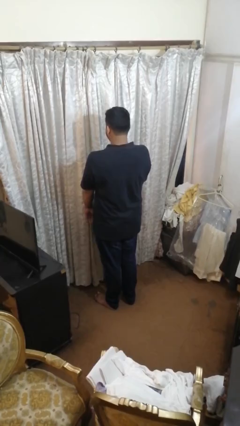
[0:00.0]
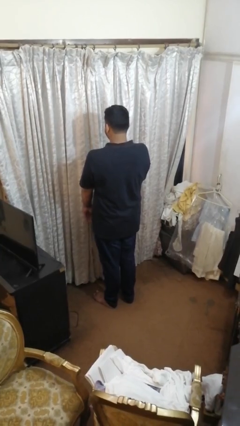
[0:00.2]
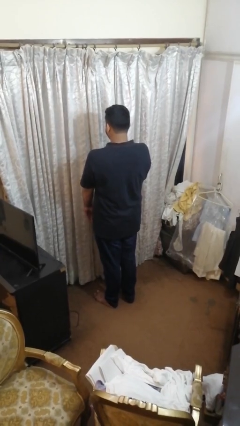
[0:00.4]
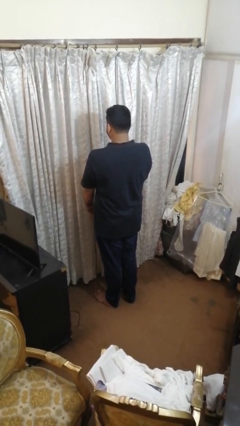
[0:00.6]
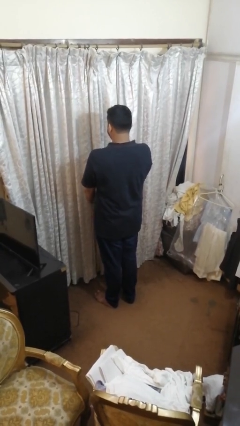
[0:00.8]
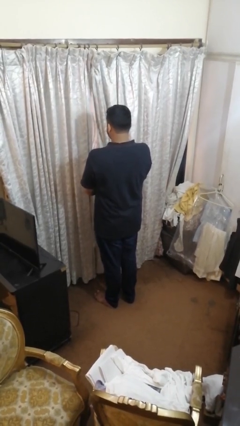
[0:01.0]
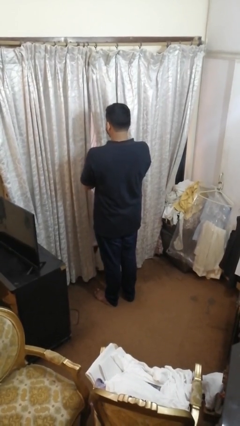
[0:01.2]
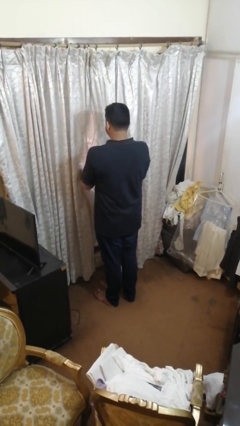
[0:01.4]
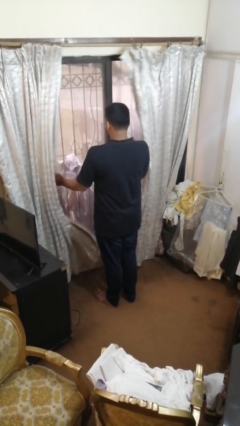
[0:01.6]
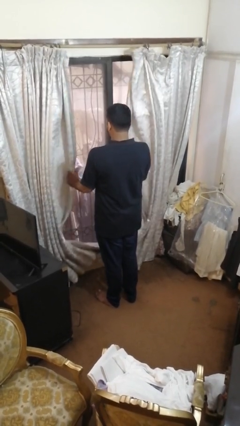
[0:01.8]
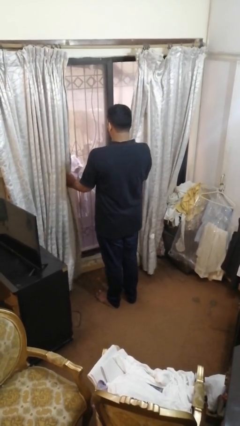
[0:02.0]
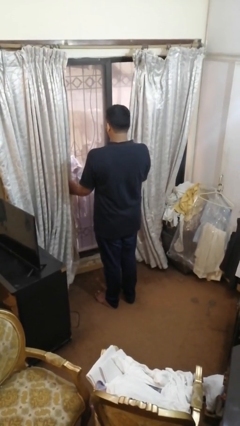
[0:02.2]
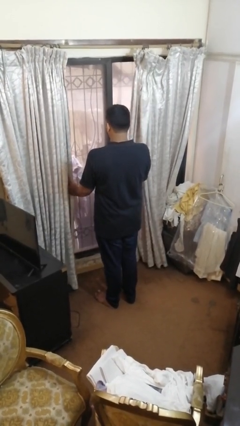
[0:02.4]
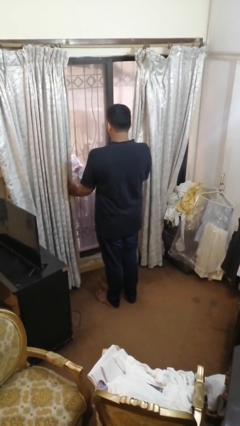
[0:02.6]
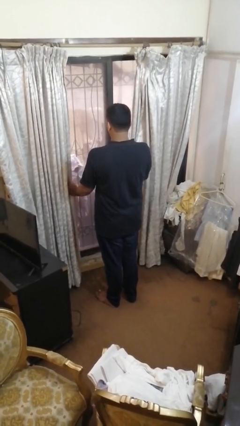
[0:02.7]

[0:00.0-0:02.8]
person opens curtains

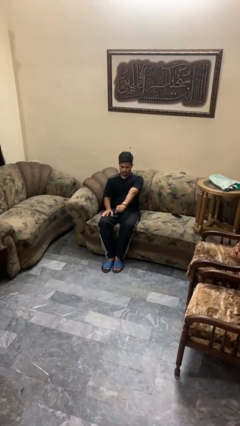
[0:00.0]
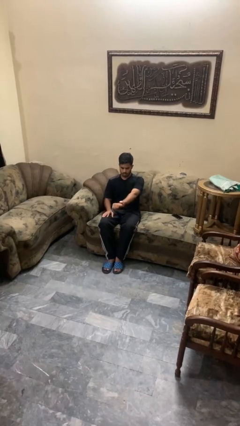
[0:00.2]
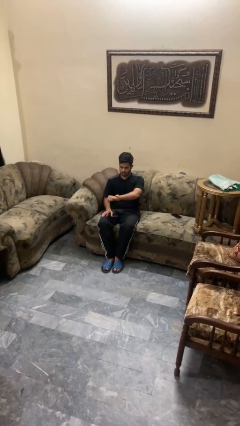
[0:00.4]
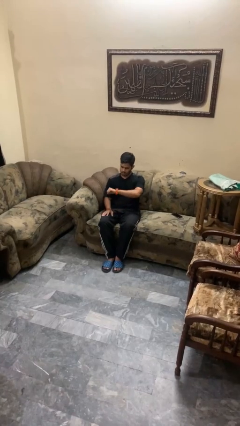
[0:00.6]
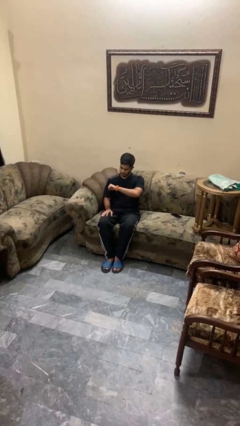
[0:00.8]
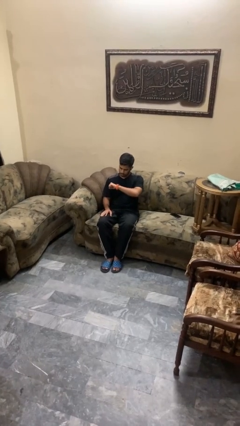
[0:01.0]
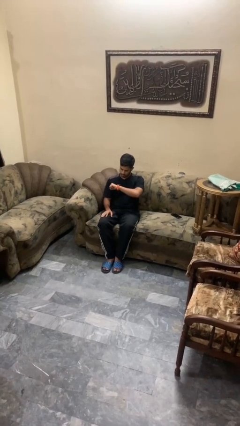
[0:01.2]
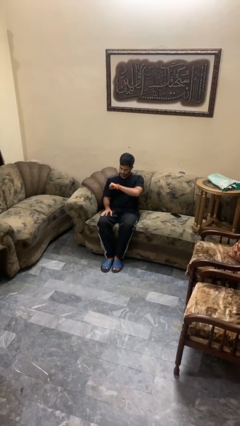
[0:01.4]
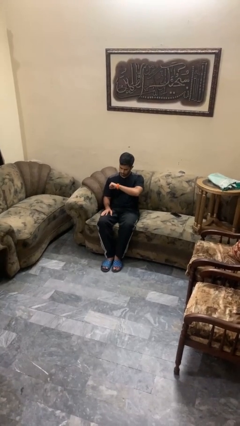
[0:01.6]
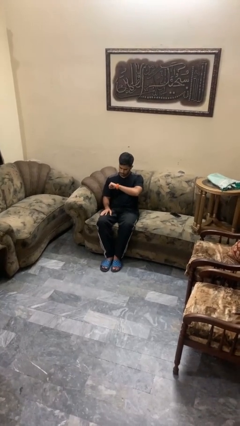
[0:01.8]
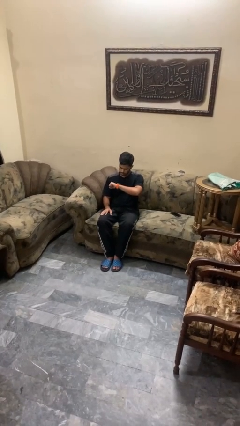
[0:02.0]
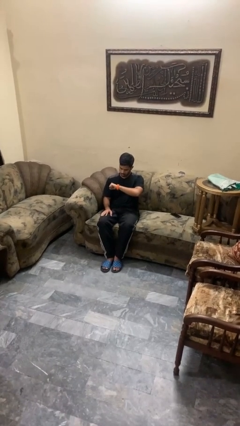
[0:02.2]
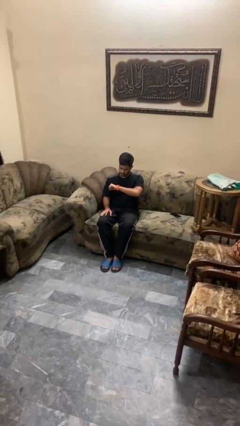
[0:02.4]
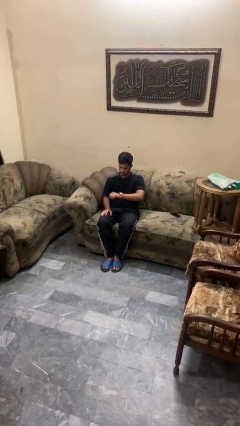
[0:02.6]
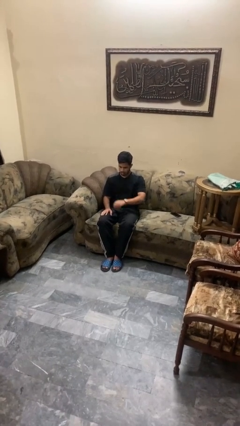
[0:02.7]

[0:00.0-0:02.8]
person looks at wristwatch

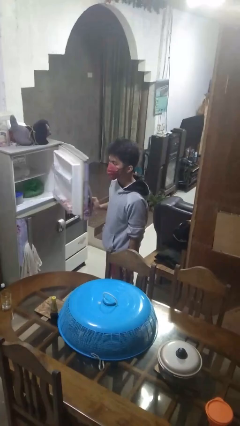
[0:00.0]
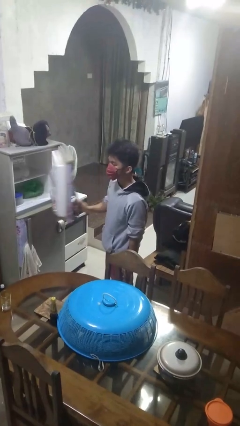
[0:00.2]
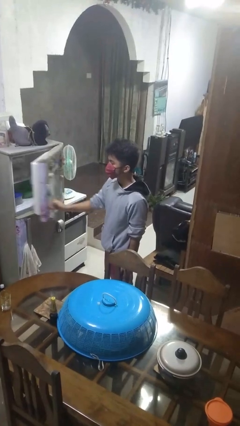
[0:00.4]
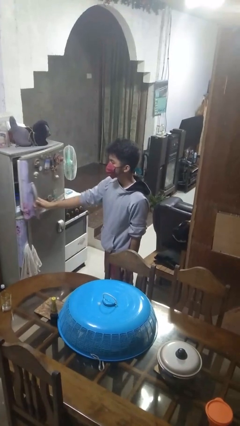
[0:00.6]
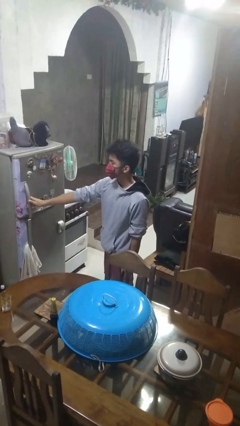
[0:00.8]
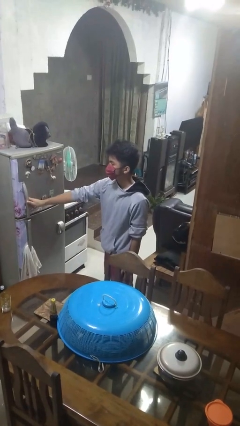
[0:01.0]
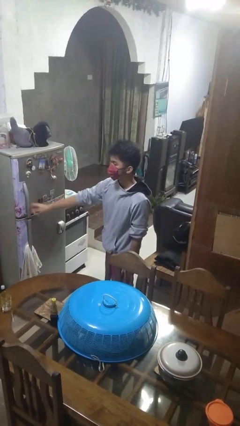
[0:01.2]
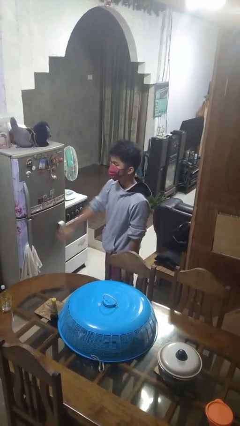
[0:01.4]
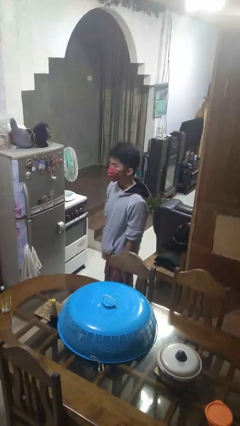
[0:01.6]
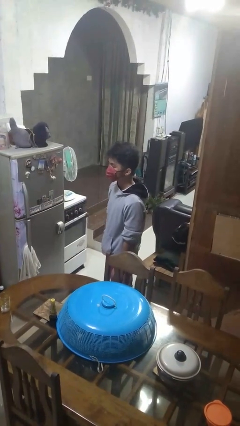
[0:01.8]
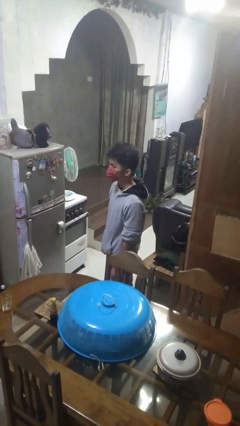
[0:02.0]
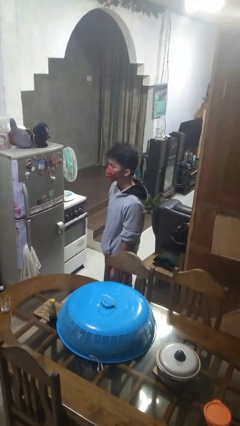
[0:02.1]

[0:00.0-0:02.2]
person closes refrigerator

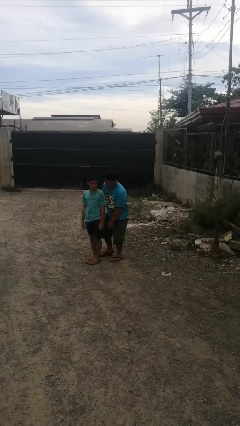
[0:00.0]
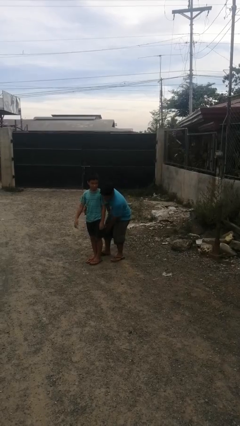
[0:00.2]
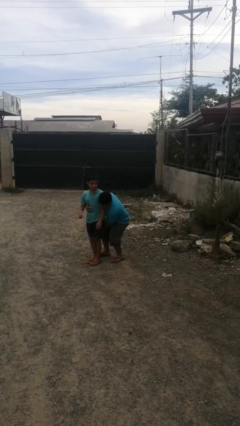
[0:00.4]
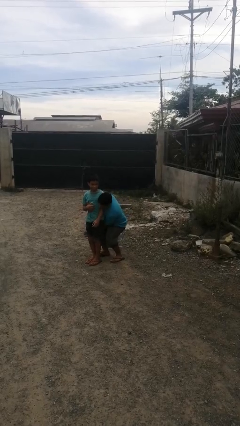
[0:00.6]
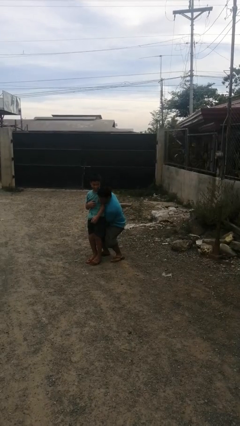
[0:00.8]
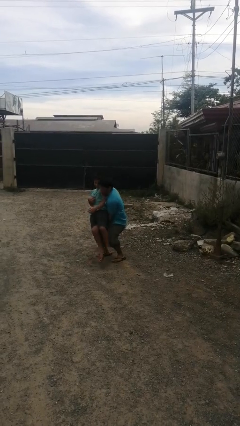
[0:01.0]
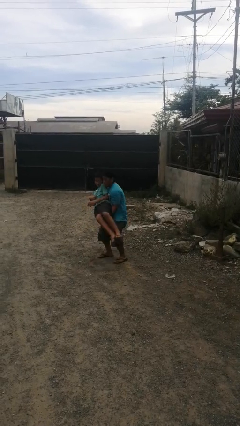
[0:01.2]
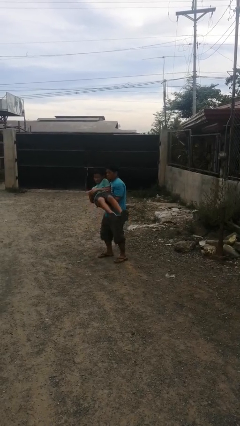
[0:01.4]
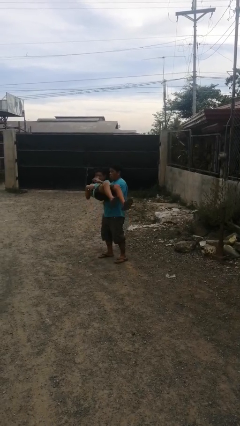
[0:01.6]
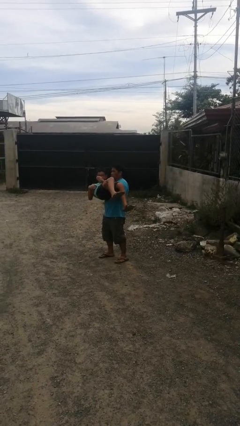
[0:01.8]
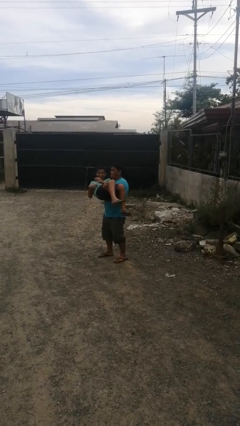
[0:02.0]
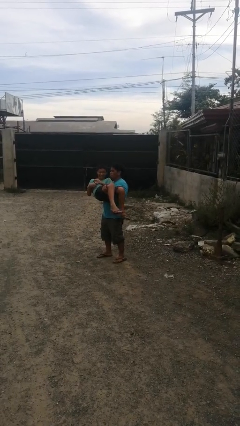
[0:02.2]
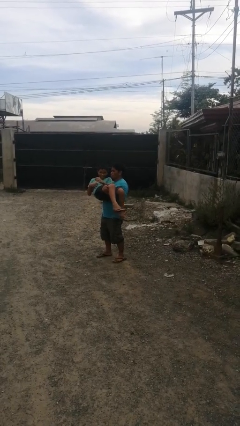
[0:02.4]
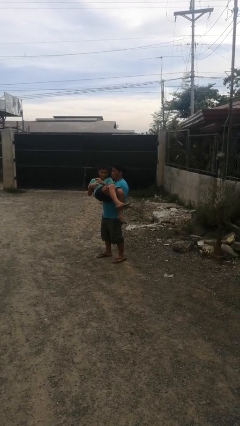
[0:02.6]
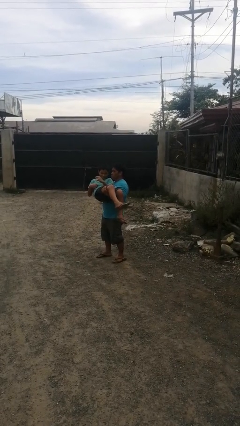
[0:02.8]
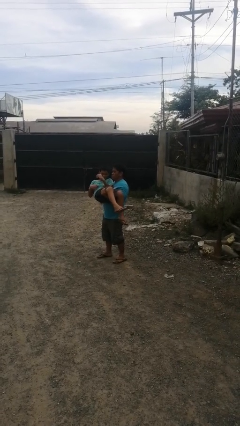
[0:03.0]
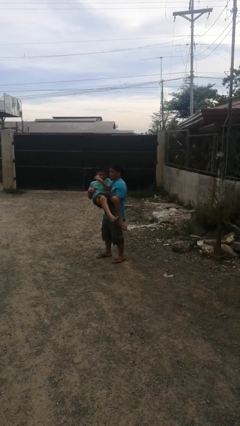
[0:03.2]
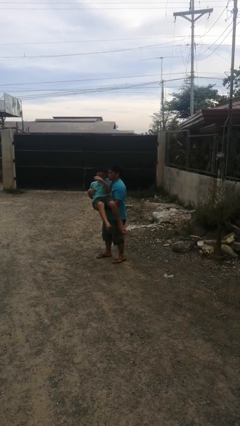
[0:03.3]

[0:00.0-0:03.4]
person picks up person

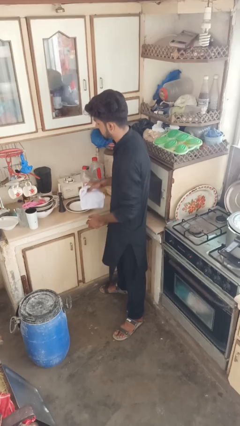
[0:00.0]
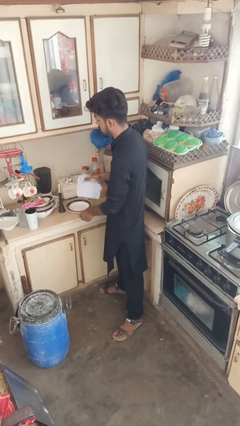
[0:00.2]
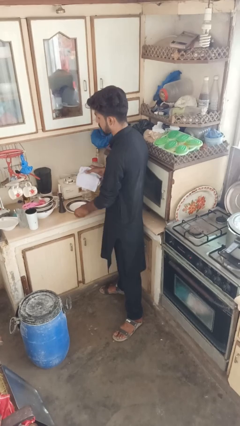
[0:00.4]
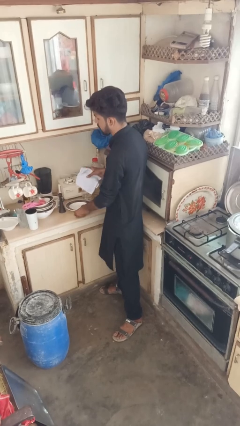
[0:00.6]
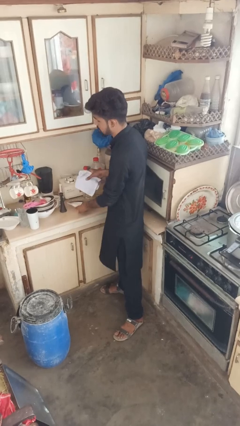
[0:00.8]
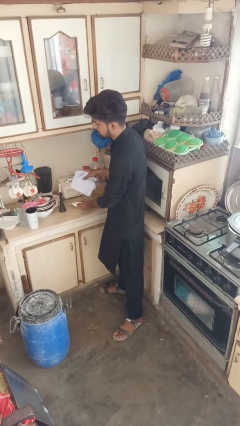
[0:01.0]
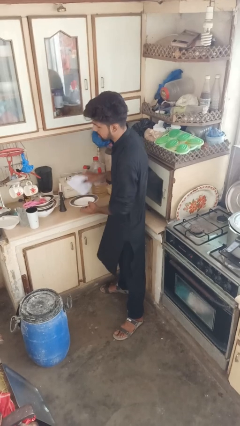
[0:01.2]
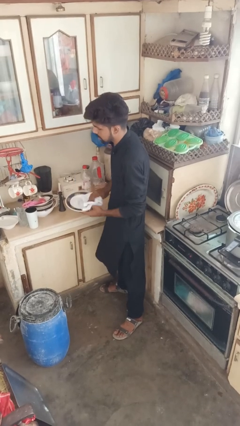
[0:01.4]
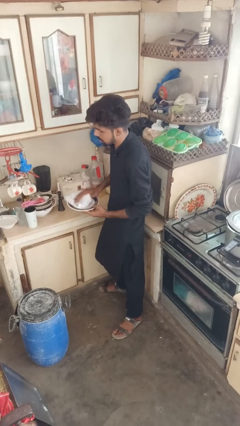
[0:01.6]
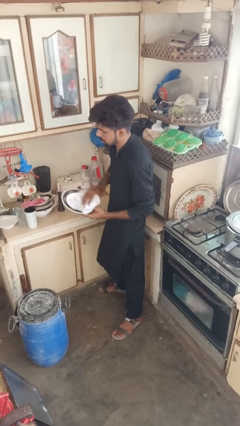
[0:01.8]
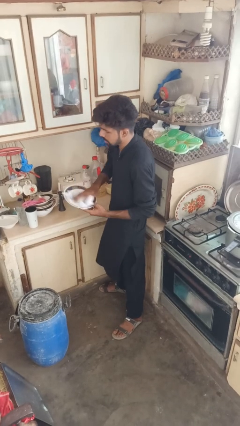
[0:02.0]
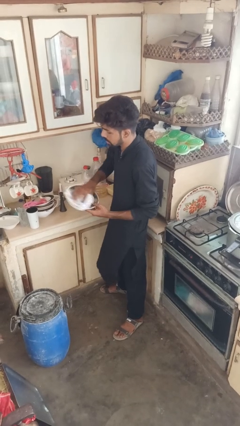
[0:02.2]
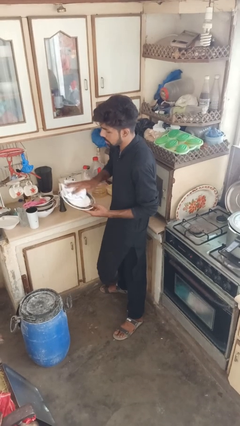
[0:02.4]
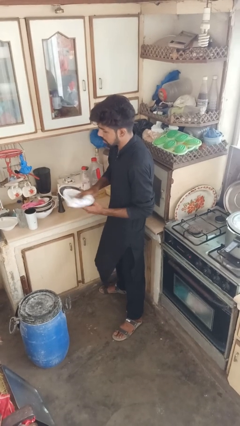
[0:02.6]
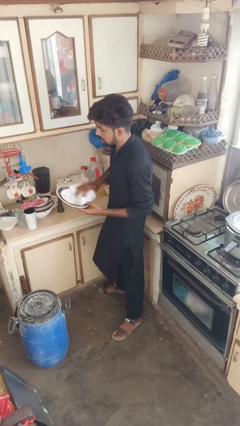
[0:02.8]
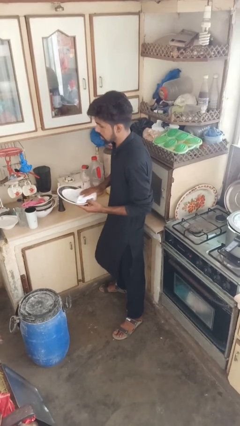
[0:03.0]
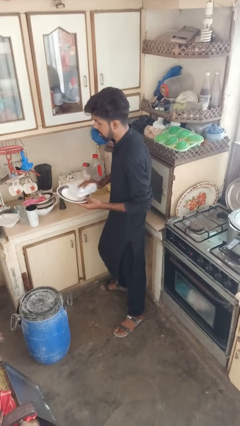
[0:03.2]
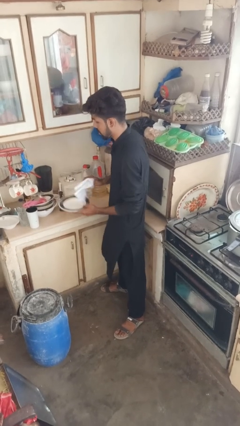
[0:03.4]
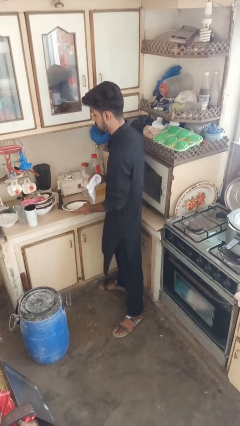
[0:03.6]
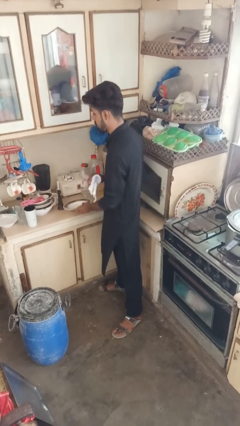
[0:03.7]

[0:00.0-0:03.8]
person dries dish

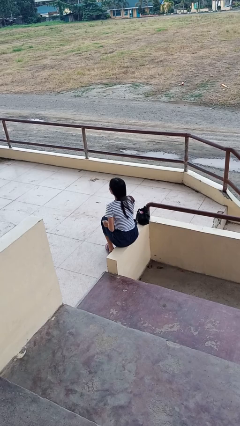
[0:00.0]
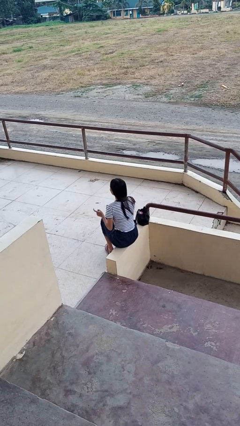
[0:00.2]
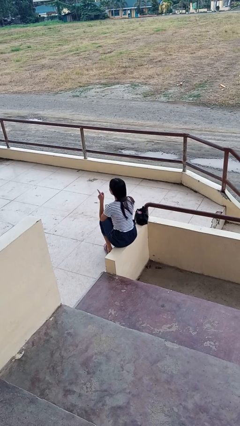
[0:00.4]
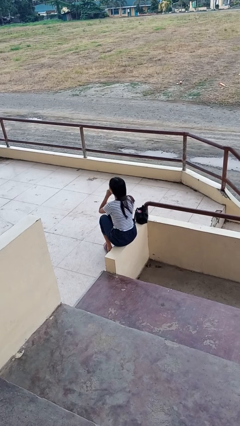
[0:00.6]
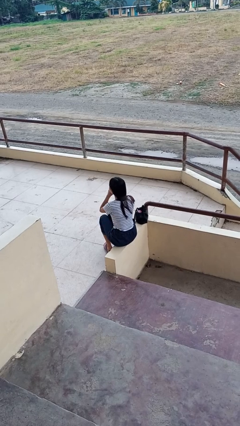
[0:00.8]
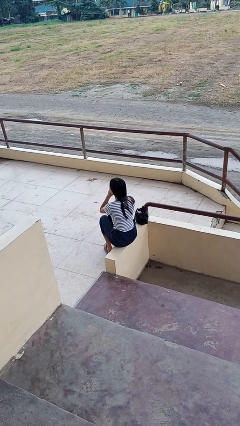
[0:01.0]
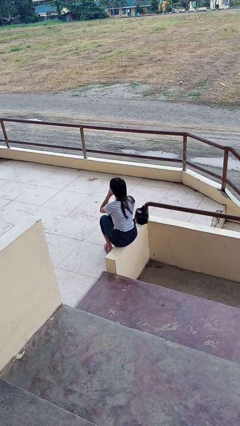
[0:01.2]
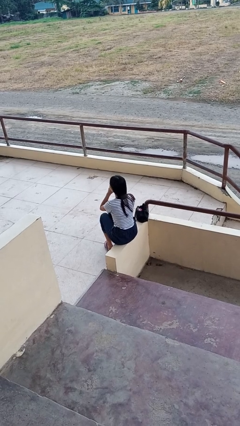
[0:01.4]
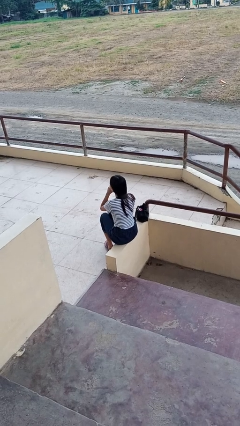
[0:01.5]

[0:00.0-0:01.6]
person gestures be quiet

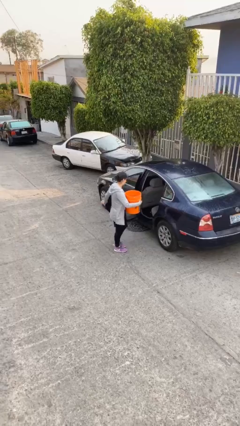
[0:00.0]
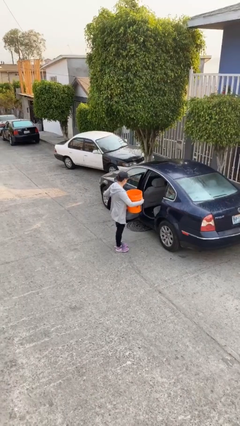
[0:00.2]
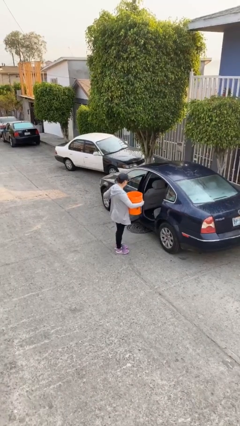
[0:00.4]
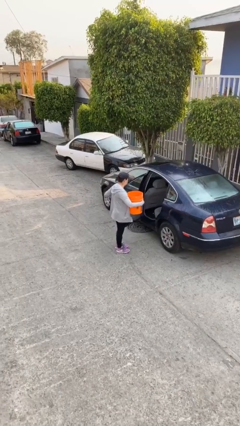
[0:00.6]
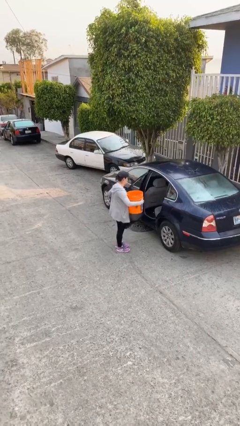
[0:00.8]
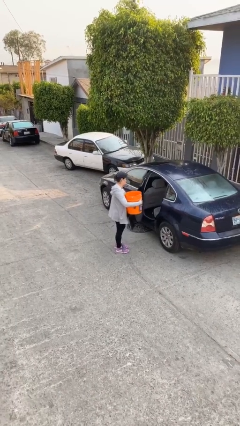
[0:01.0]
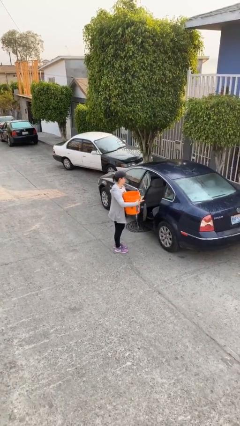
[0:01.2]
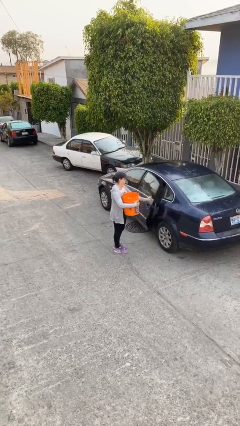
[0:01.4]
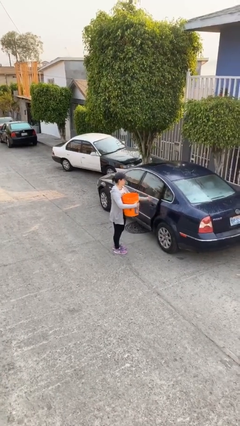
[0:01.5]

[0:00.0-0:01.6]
person closes car door
